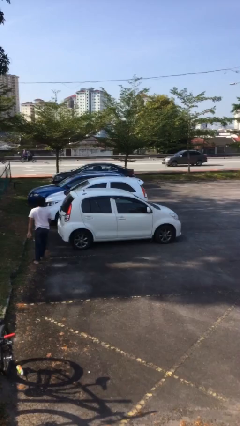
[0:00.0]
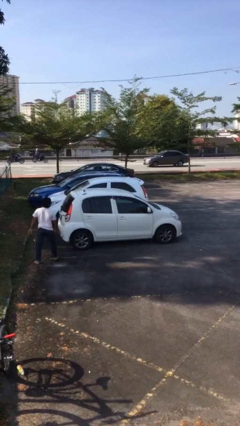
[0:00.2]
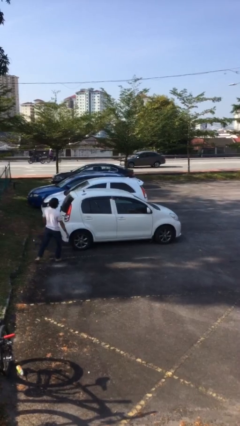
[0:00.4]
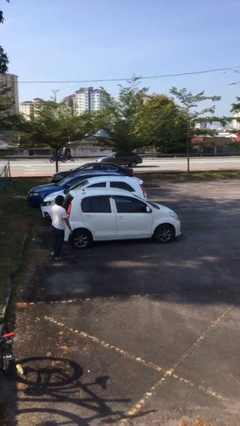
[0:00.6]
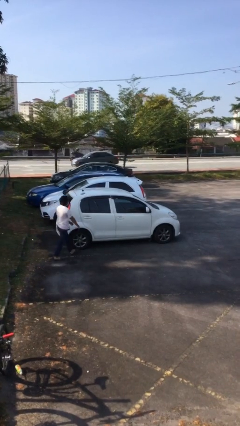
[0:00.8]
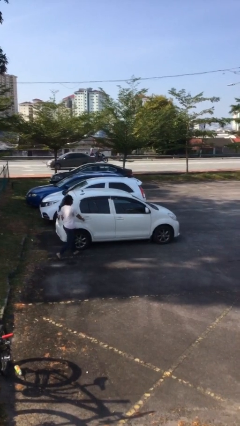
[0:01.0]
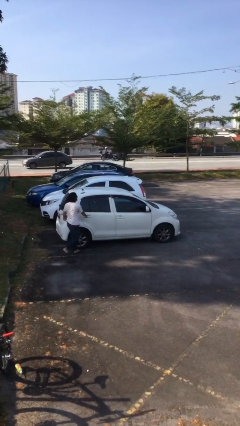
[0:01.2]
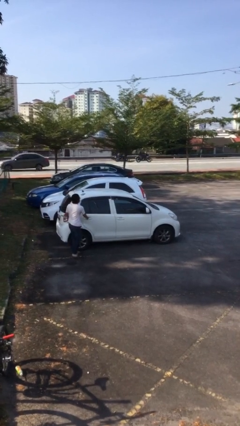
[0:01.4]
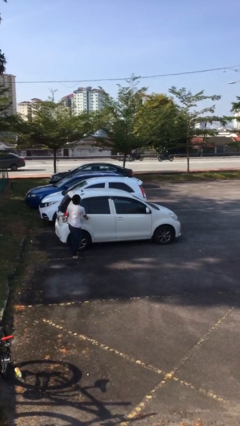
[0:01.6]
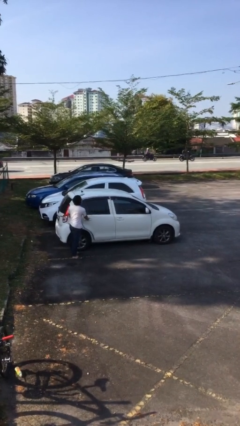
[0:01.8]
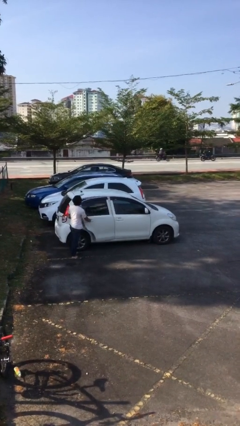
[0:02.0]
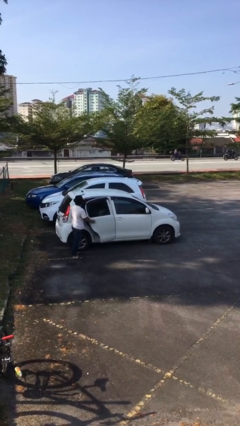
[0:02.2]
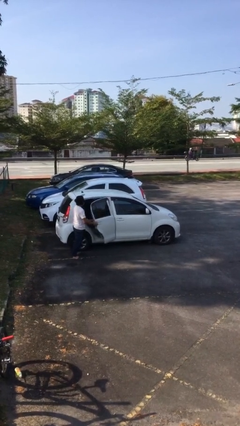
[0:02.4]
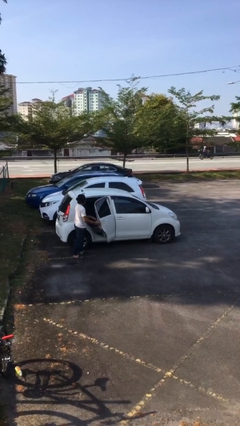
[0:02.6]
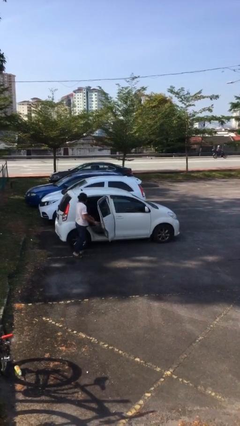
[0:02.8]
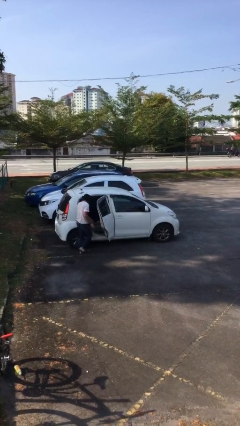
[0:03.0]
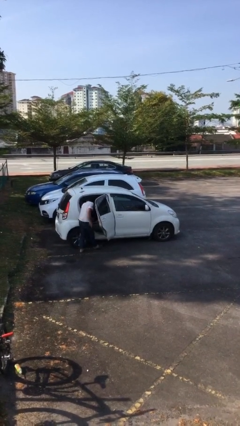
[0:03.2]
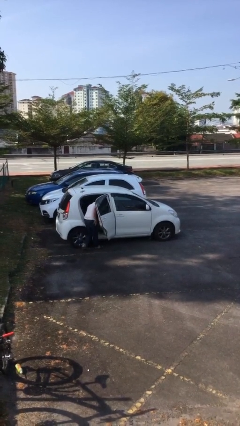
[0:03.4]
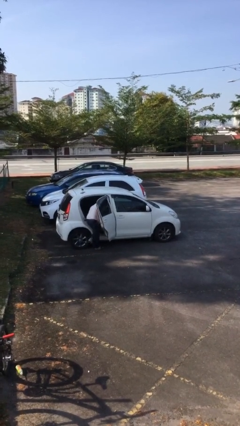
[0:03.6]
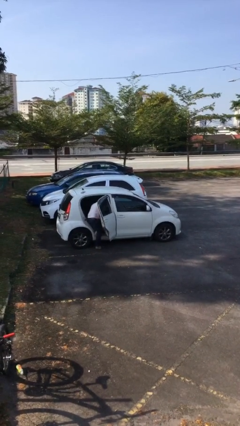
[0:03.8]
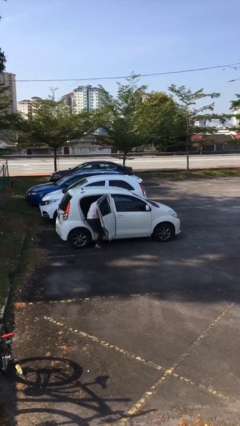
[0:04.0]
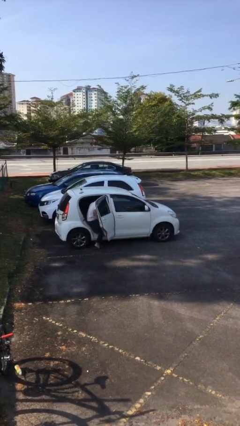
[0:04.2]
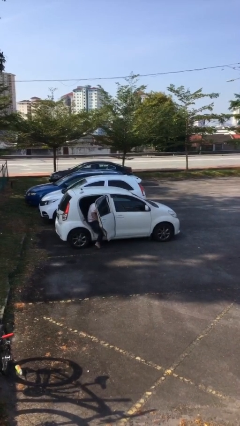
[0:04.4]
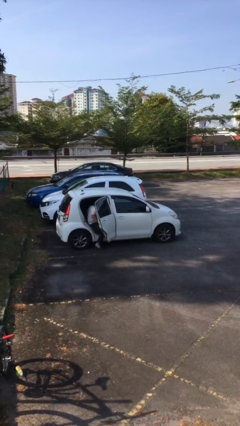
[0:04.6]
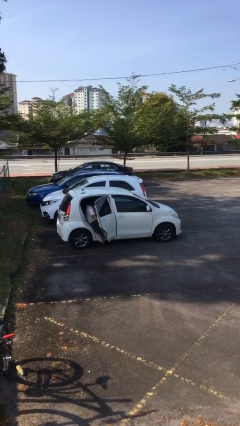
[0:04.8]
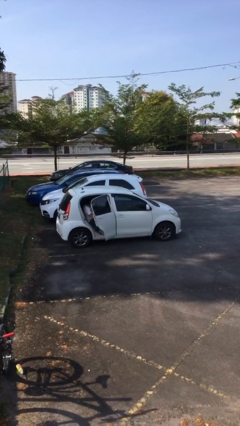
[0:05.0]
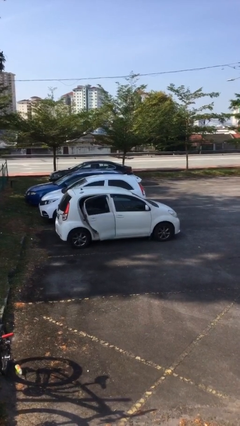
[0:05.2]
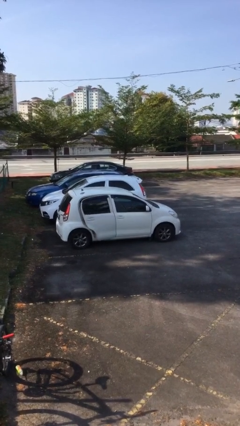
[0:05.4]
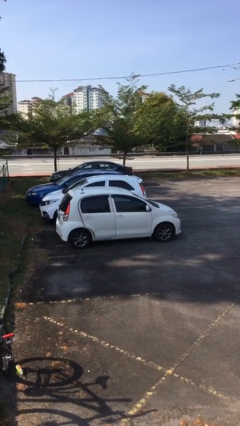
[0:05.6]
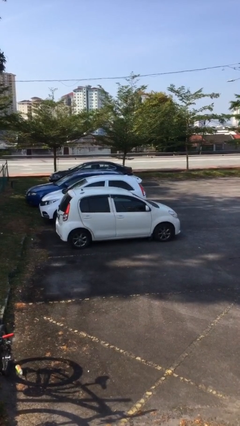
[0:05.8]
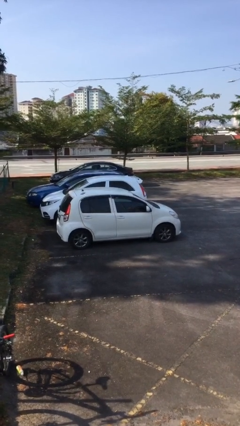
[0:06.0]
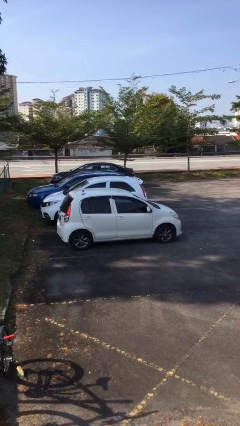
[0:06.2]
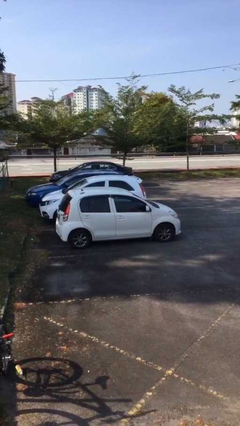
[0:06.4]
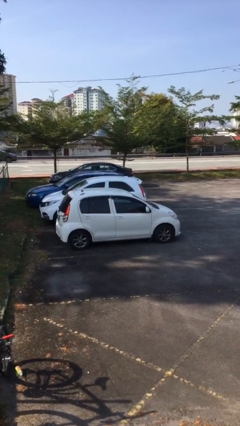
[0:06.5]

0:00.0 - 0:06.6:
car picks up person

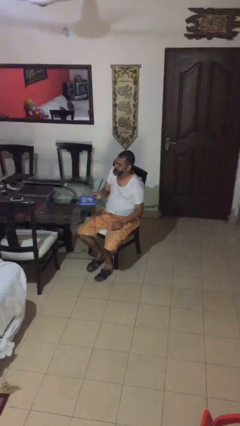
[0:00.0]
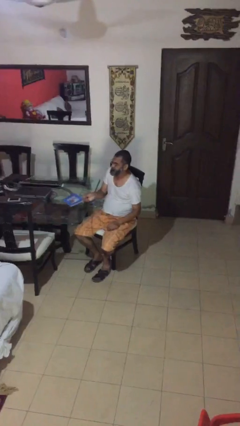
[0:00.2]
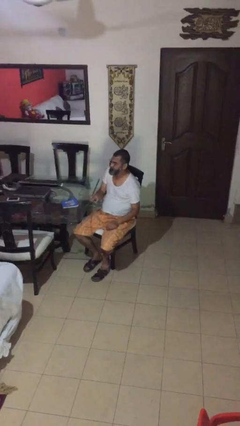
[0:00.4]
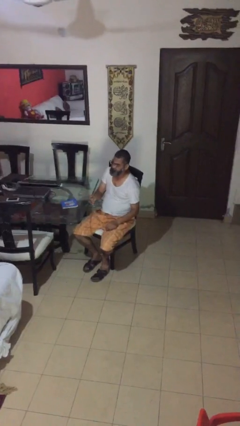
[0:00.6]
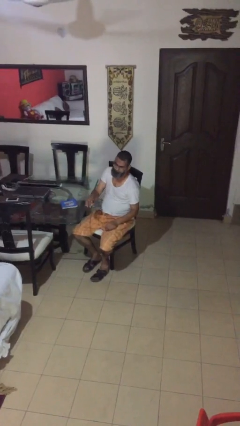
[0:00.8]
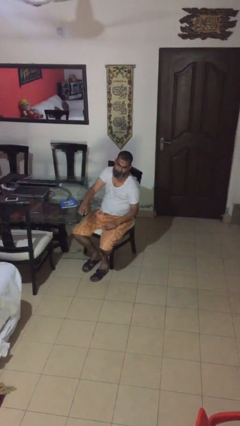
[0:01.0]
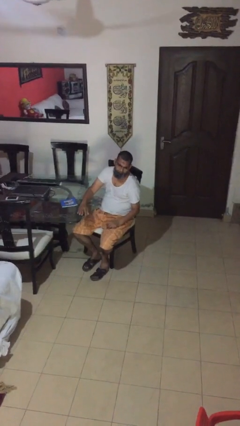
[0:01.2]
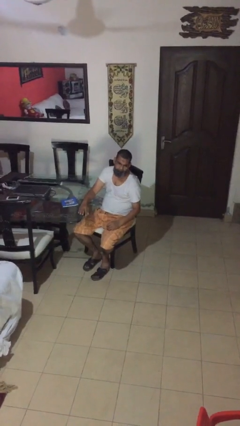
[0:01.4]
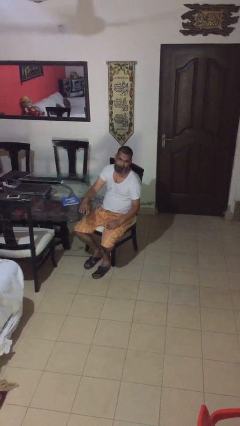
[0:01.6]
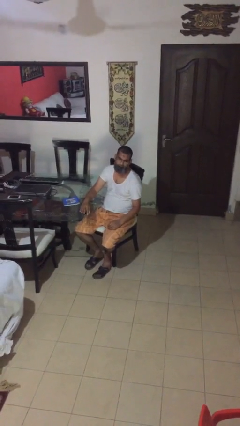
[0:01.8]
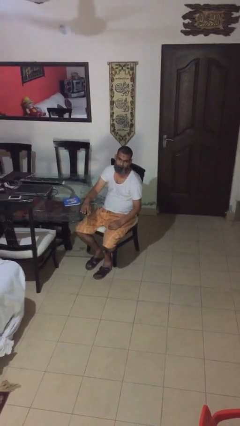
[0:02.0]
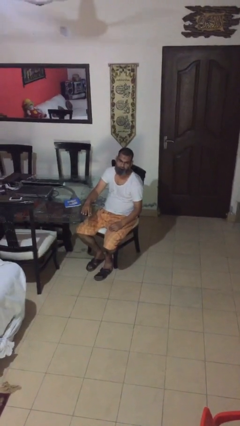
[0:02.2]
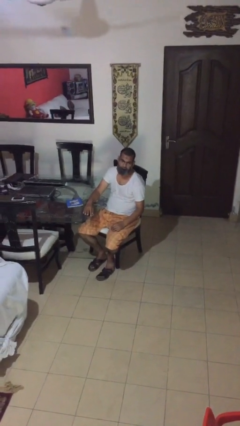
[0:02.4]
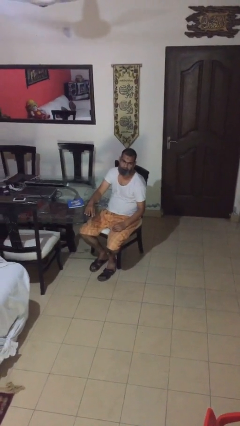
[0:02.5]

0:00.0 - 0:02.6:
person puts down object on table

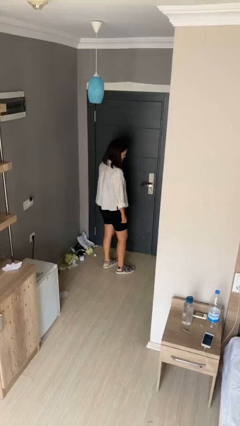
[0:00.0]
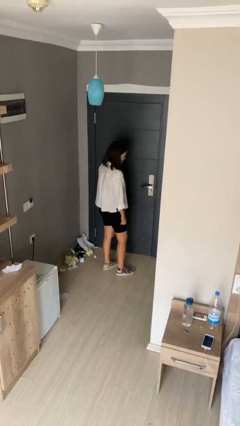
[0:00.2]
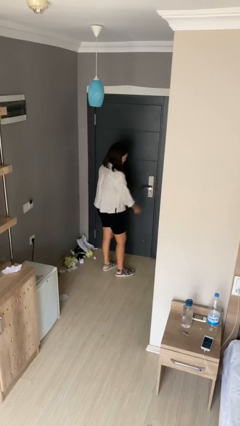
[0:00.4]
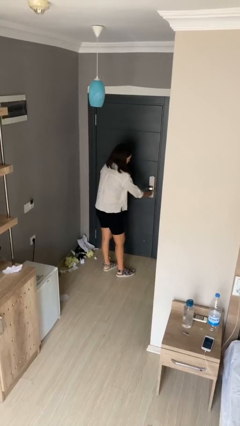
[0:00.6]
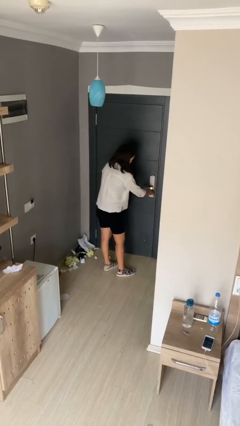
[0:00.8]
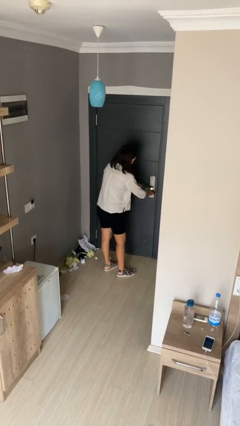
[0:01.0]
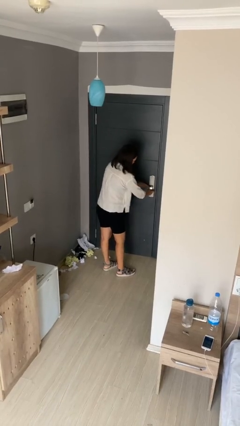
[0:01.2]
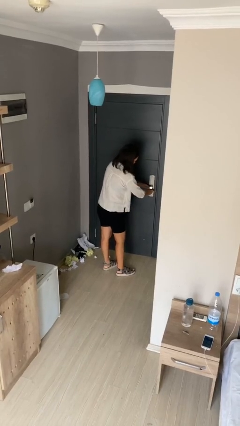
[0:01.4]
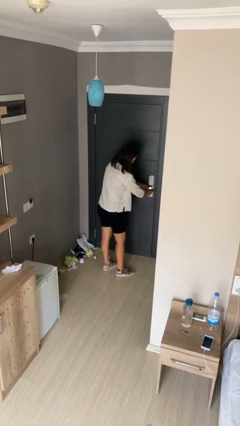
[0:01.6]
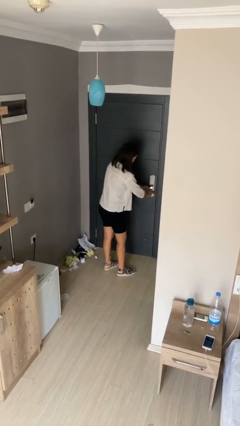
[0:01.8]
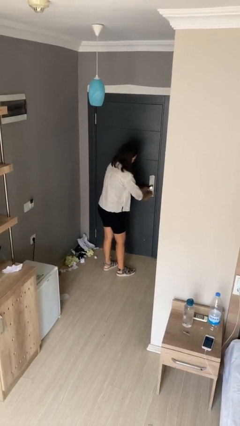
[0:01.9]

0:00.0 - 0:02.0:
person unlocks door with keys

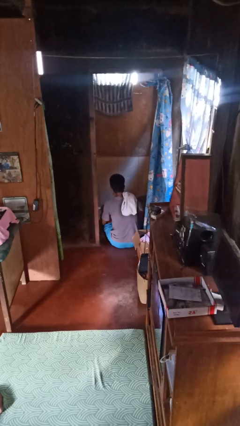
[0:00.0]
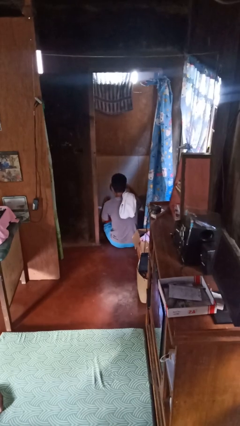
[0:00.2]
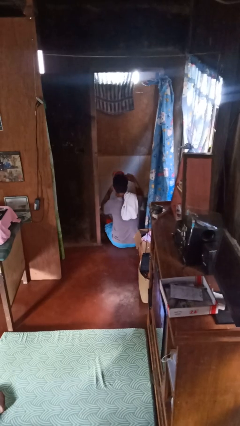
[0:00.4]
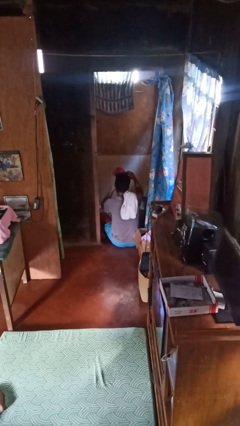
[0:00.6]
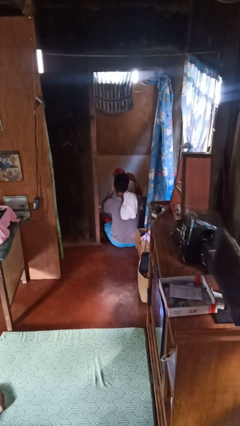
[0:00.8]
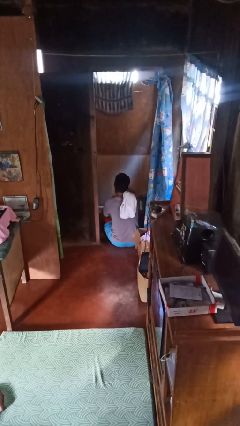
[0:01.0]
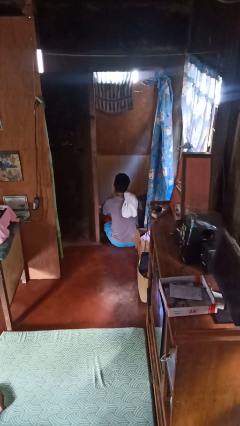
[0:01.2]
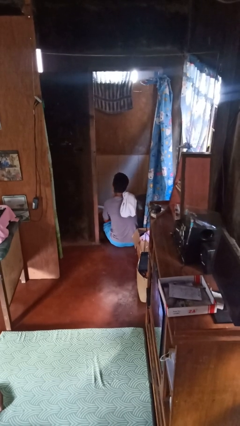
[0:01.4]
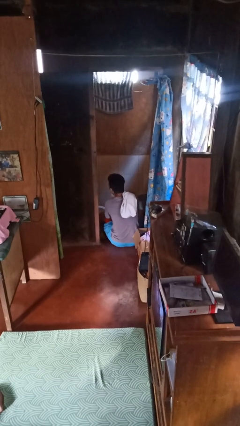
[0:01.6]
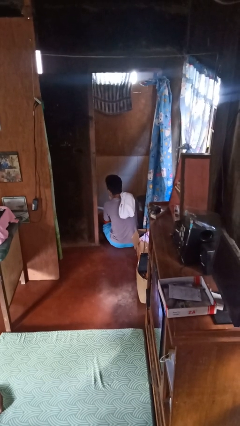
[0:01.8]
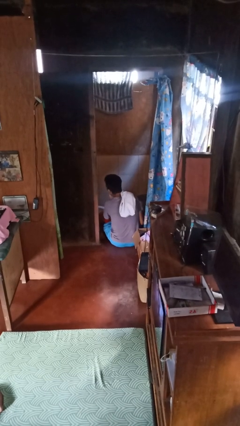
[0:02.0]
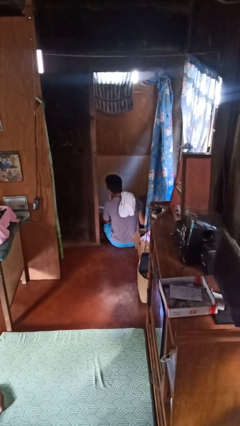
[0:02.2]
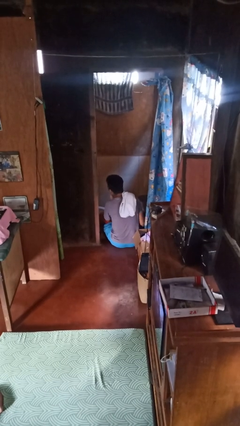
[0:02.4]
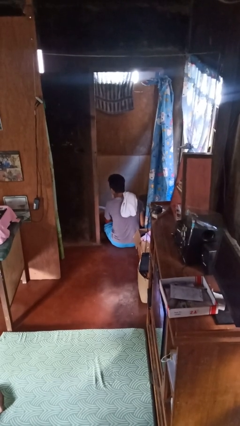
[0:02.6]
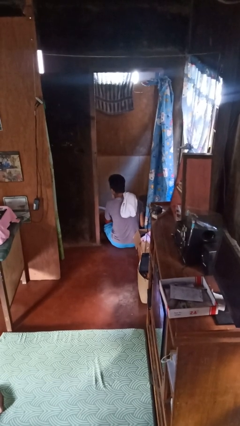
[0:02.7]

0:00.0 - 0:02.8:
person washes face

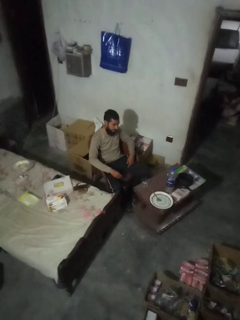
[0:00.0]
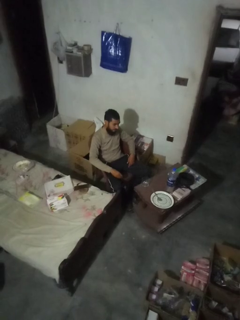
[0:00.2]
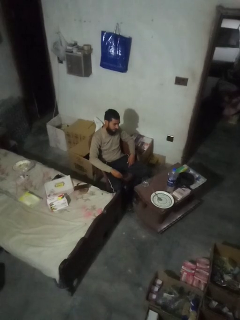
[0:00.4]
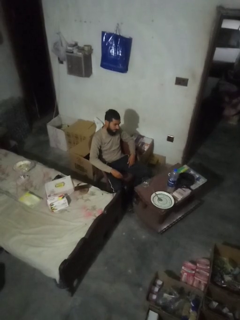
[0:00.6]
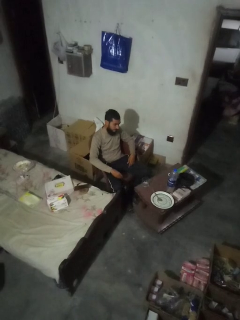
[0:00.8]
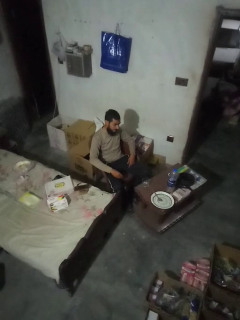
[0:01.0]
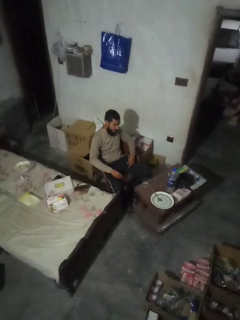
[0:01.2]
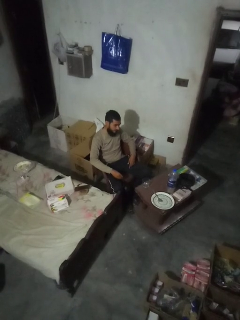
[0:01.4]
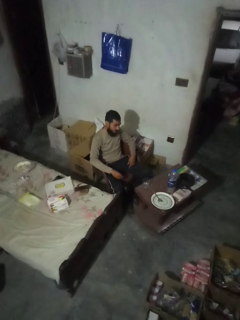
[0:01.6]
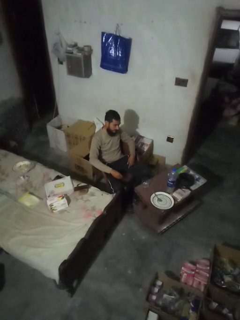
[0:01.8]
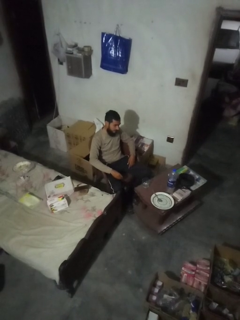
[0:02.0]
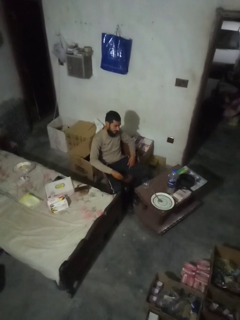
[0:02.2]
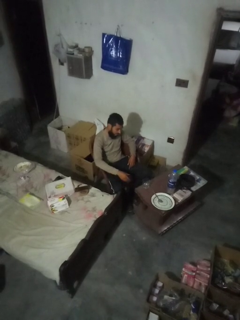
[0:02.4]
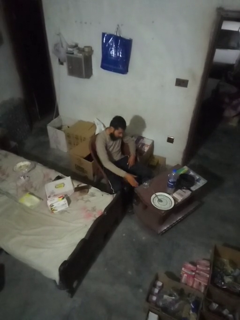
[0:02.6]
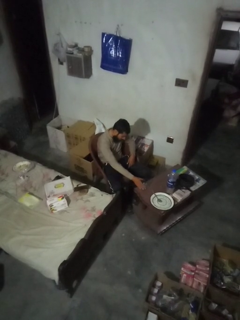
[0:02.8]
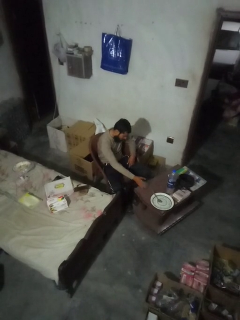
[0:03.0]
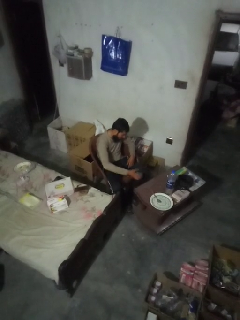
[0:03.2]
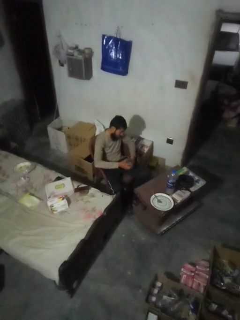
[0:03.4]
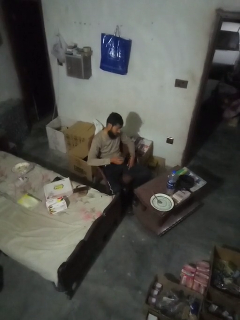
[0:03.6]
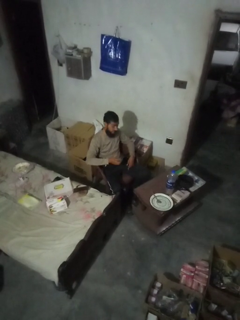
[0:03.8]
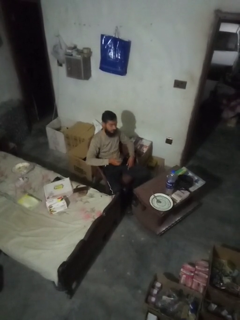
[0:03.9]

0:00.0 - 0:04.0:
person picks up object from table

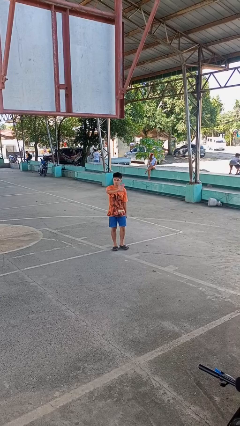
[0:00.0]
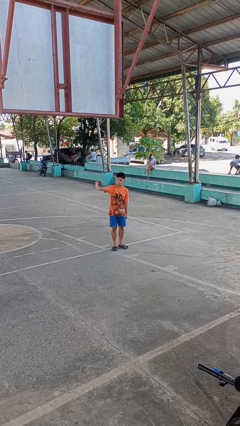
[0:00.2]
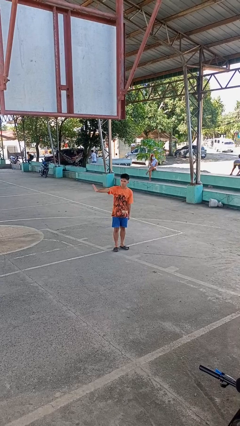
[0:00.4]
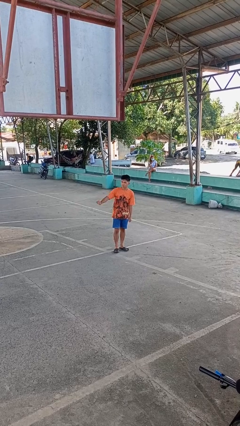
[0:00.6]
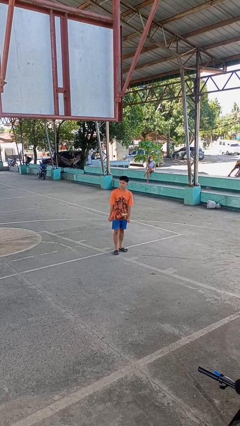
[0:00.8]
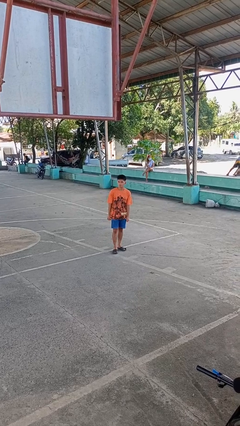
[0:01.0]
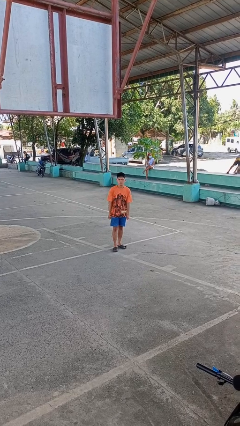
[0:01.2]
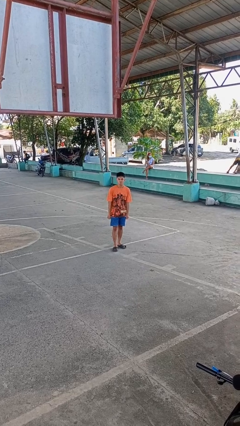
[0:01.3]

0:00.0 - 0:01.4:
person gestures swipe right
